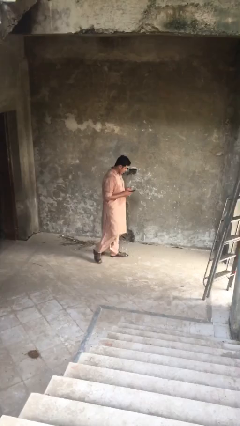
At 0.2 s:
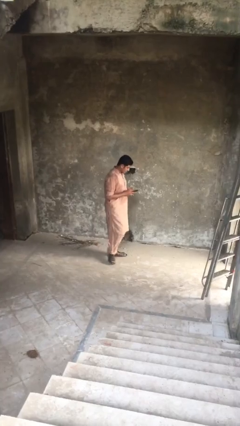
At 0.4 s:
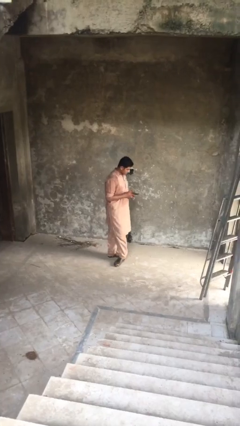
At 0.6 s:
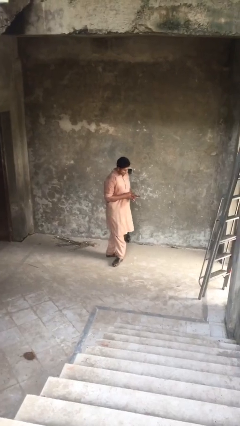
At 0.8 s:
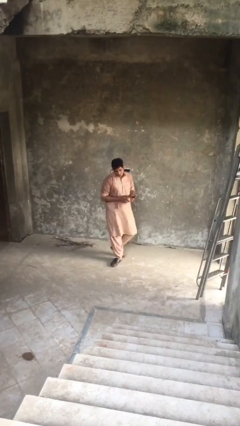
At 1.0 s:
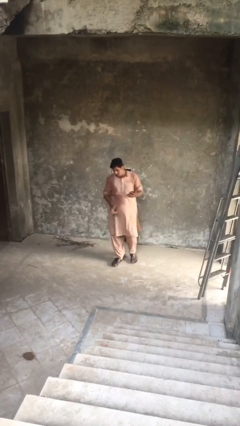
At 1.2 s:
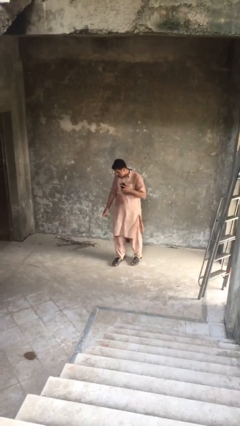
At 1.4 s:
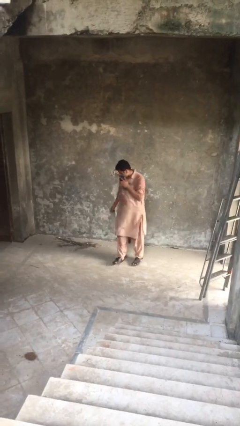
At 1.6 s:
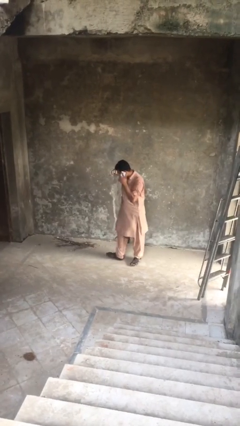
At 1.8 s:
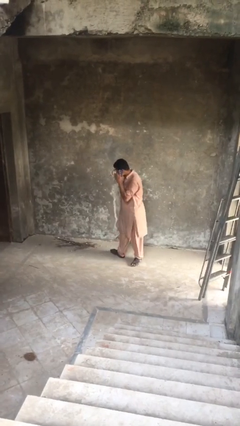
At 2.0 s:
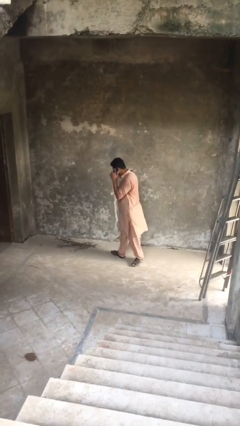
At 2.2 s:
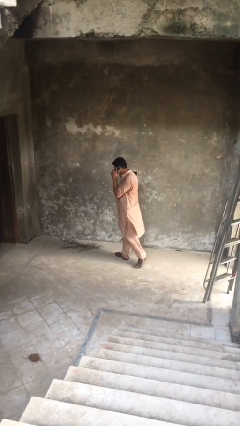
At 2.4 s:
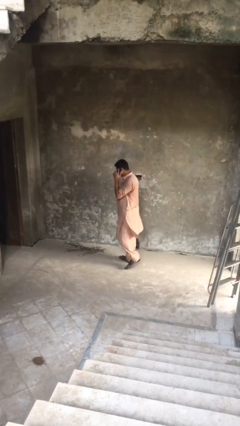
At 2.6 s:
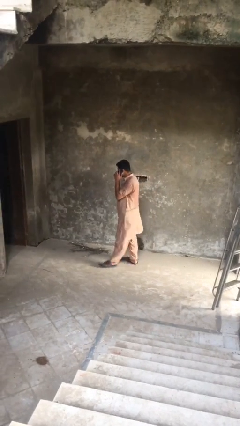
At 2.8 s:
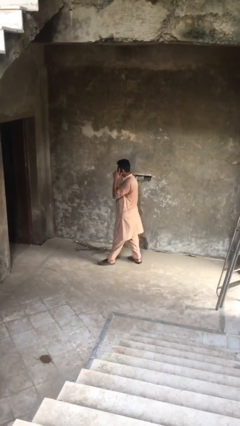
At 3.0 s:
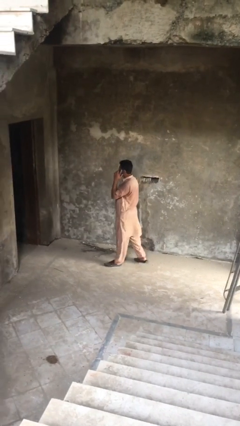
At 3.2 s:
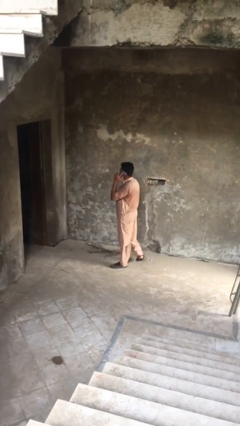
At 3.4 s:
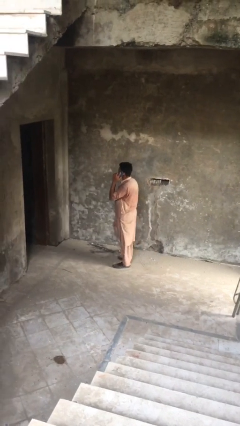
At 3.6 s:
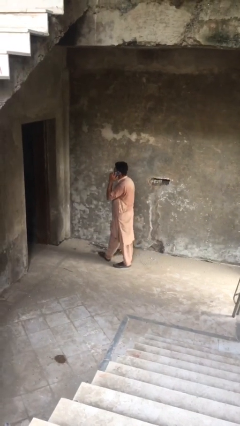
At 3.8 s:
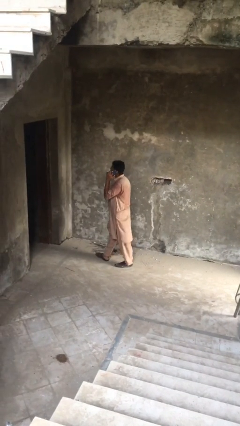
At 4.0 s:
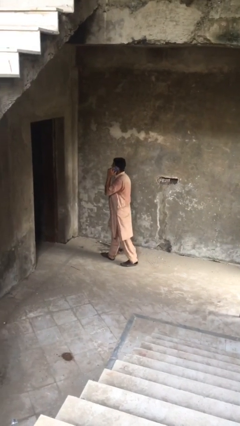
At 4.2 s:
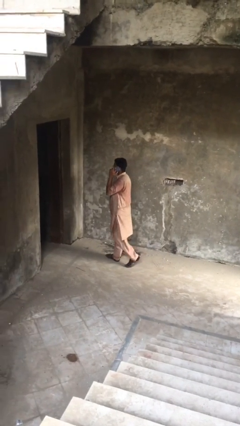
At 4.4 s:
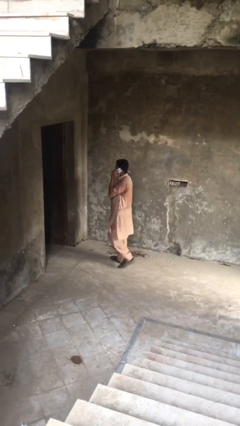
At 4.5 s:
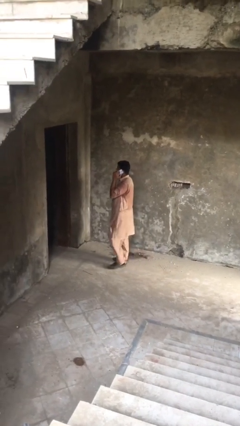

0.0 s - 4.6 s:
person talks on phone

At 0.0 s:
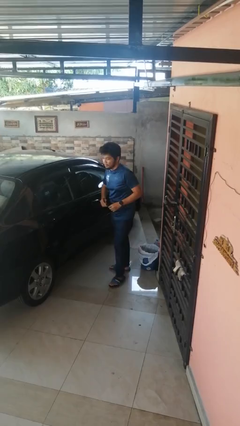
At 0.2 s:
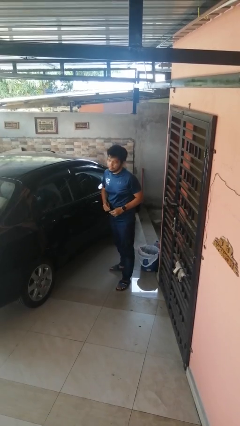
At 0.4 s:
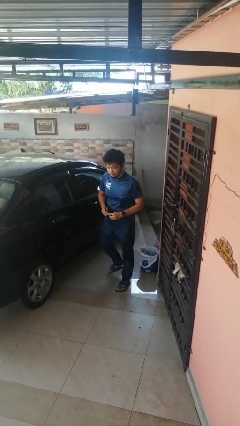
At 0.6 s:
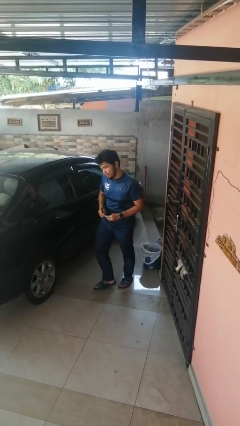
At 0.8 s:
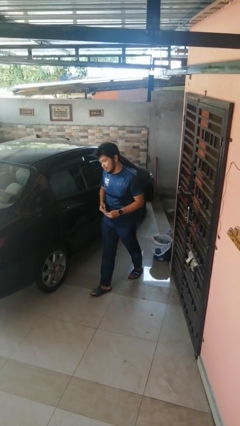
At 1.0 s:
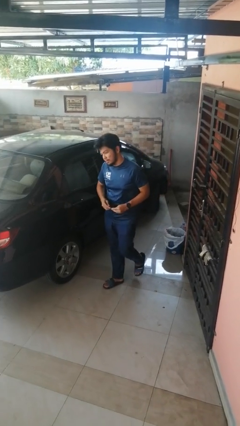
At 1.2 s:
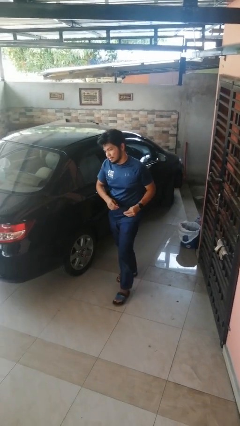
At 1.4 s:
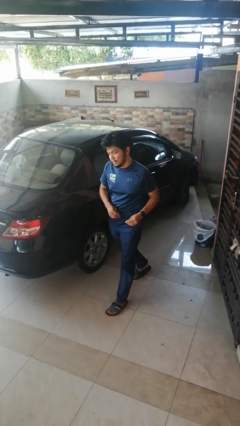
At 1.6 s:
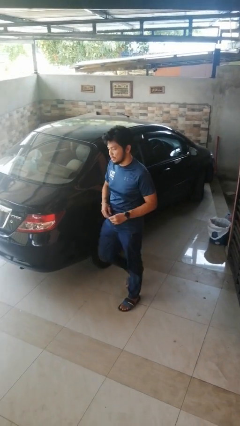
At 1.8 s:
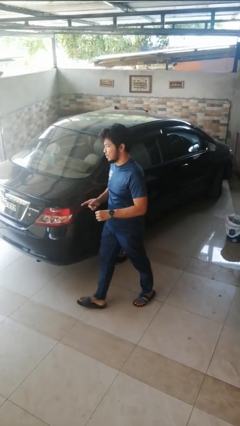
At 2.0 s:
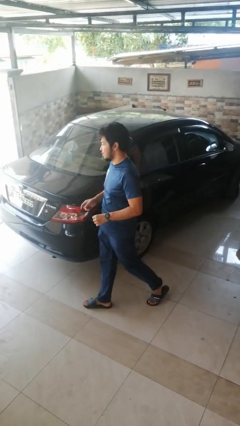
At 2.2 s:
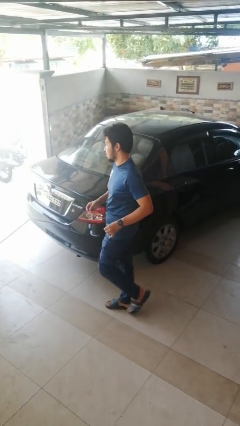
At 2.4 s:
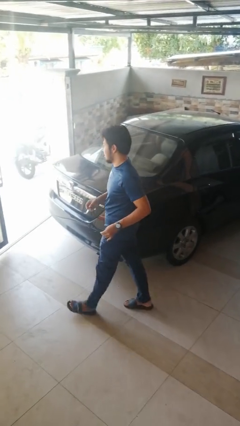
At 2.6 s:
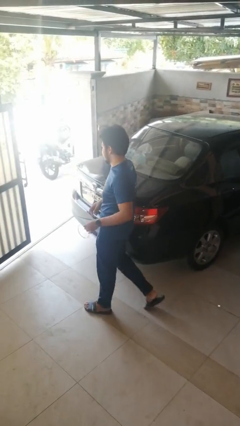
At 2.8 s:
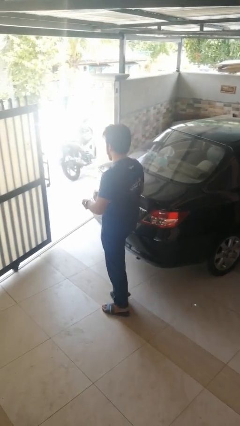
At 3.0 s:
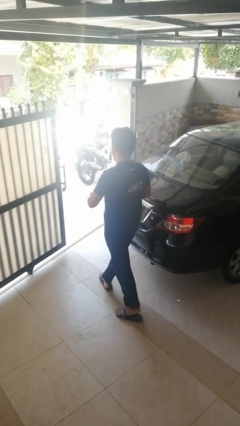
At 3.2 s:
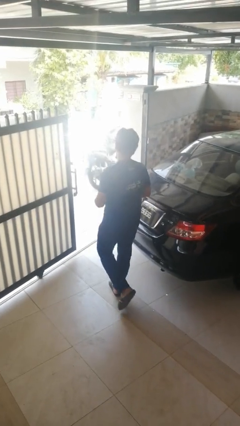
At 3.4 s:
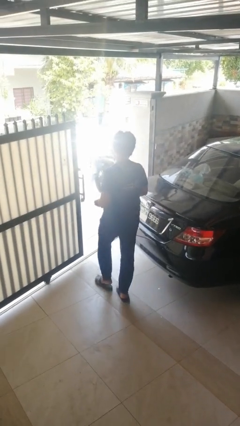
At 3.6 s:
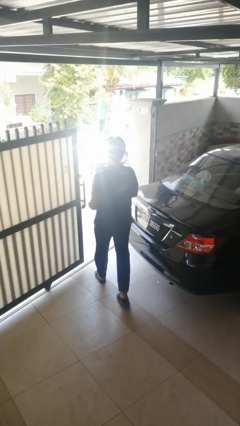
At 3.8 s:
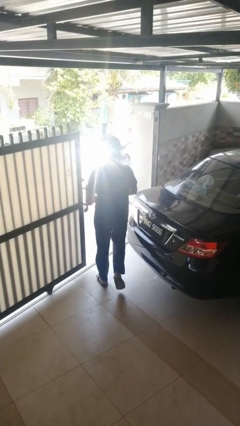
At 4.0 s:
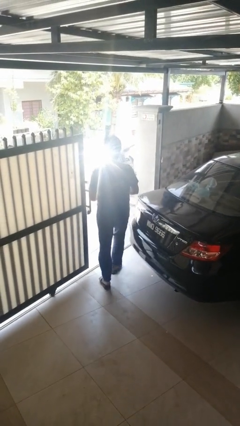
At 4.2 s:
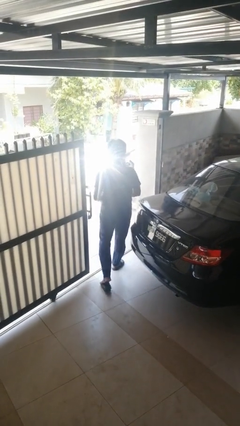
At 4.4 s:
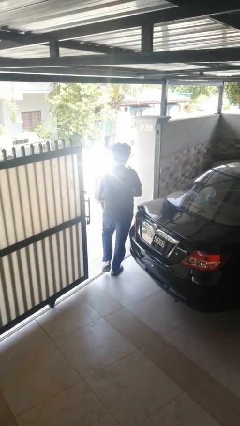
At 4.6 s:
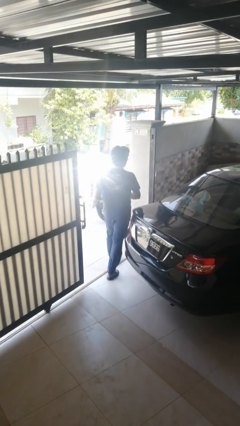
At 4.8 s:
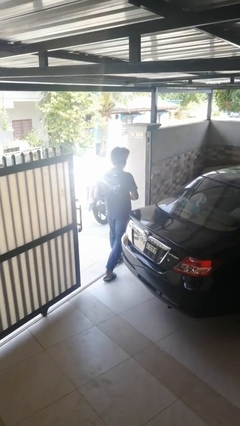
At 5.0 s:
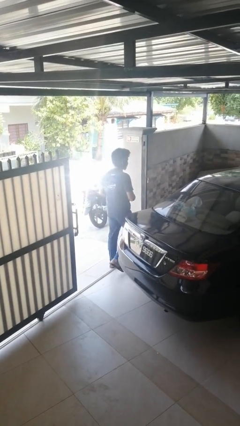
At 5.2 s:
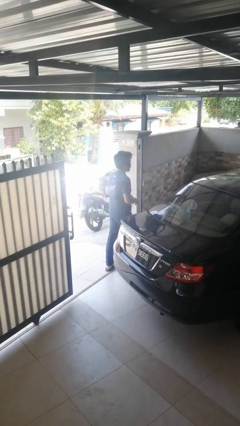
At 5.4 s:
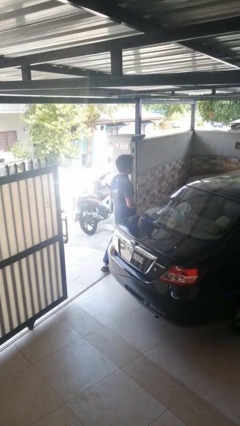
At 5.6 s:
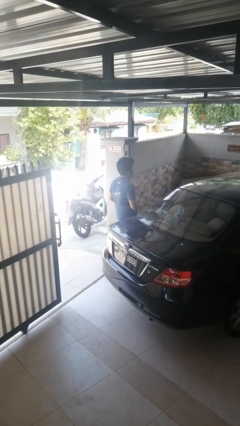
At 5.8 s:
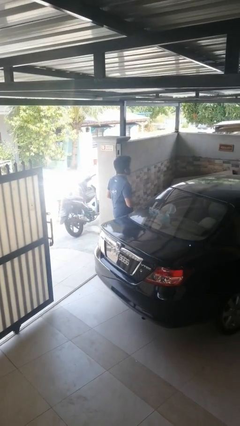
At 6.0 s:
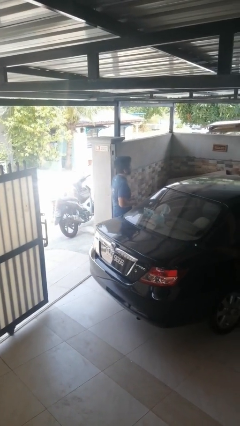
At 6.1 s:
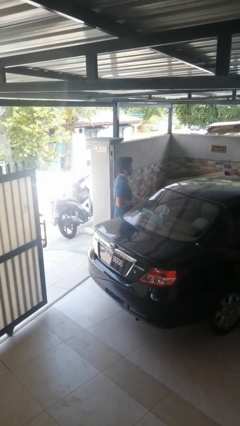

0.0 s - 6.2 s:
person walks around car

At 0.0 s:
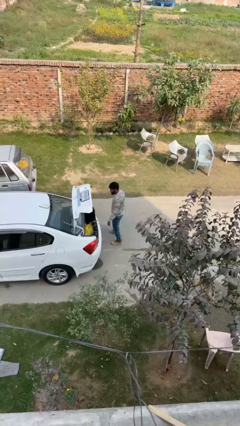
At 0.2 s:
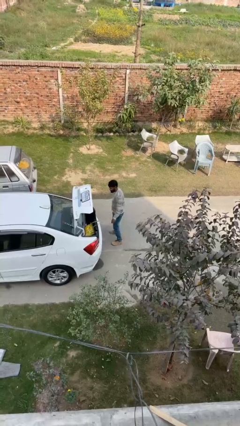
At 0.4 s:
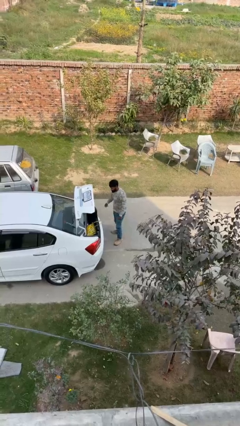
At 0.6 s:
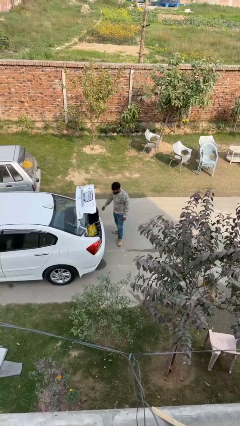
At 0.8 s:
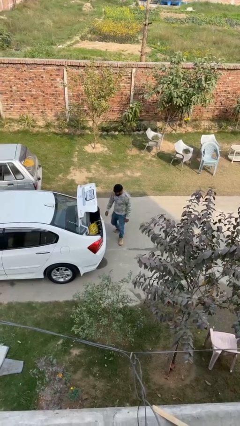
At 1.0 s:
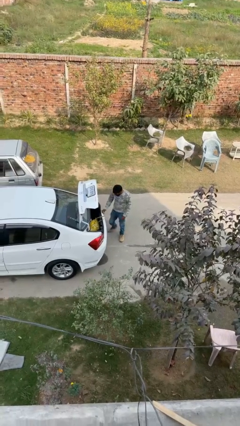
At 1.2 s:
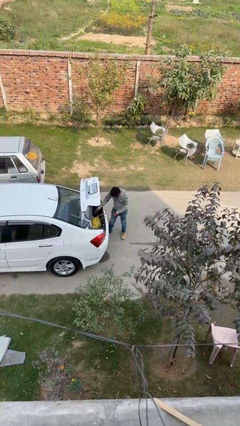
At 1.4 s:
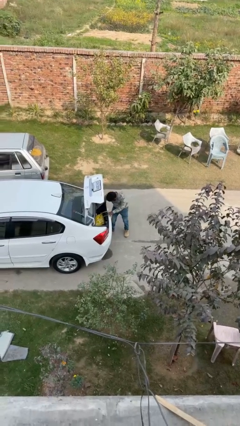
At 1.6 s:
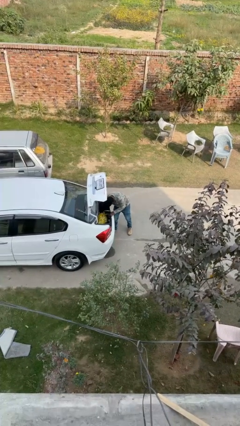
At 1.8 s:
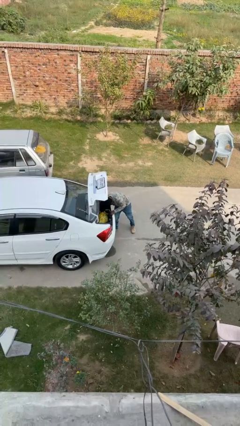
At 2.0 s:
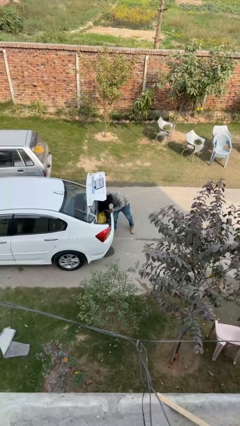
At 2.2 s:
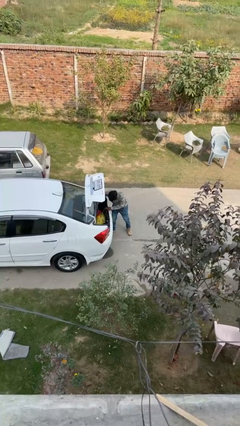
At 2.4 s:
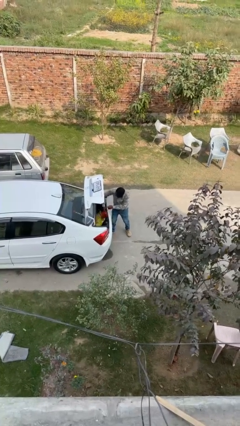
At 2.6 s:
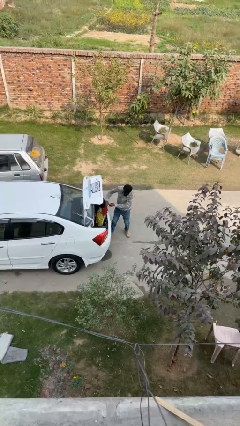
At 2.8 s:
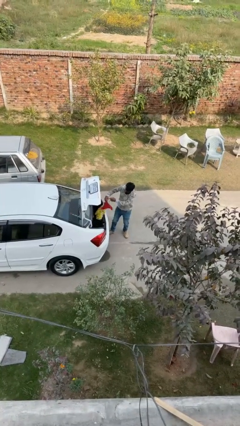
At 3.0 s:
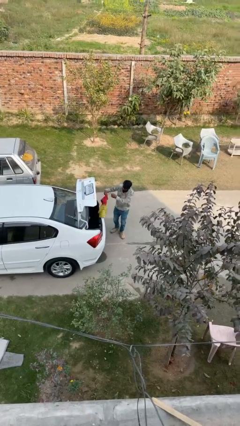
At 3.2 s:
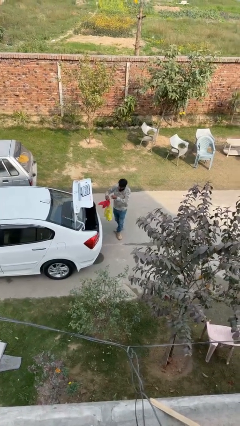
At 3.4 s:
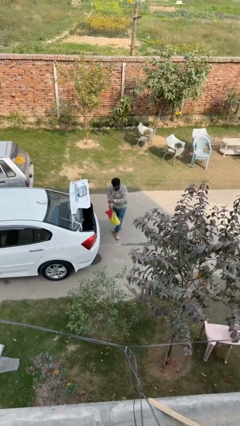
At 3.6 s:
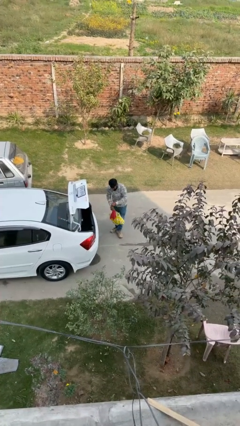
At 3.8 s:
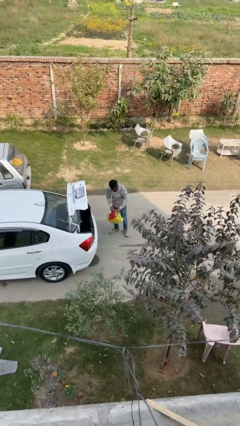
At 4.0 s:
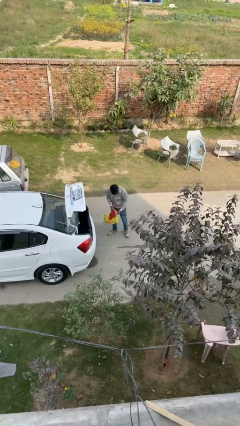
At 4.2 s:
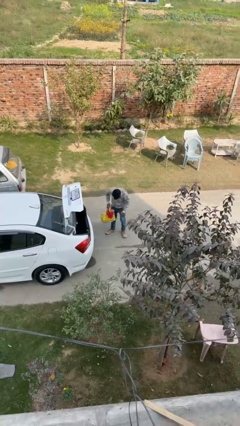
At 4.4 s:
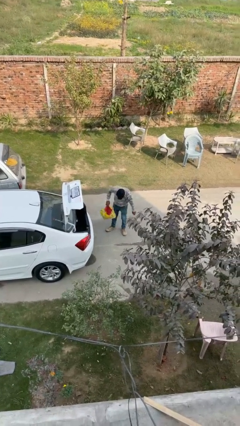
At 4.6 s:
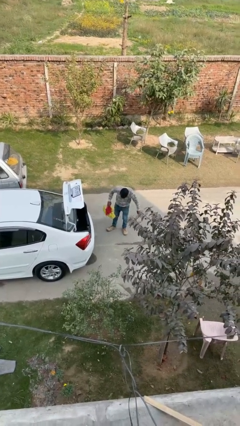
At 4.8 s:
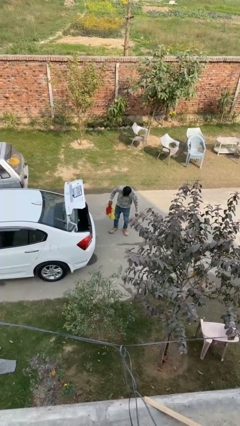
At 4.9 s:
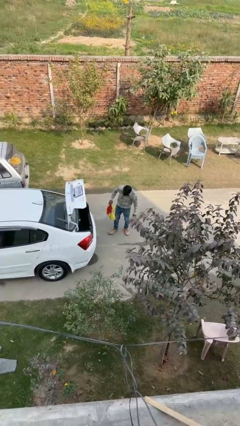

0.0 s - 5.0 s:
person unloads car

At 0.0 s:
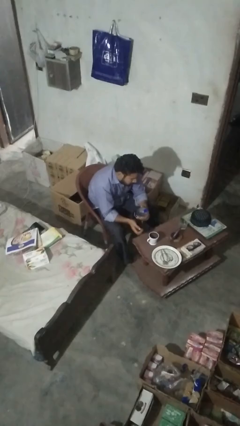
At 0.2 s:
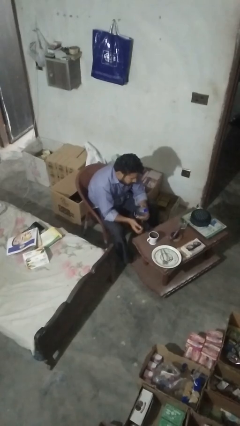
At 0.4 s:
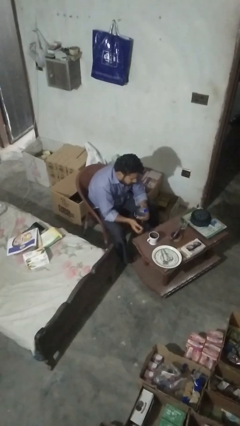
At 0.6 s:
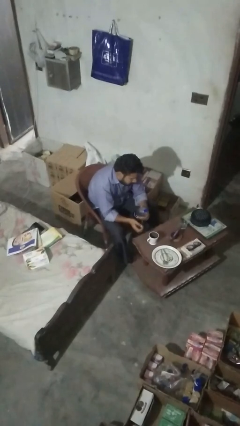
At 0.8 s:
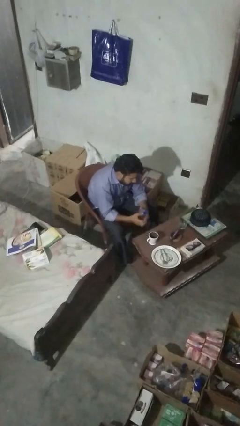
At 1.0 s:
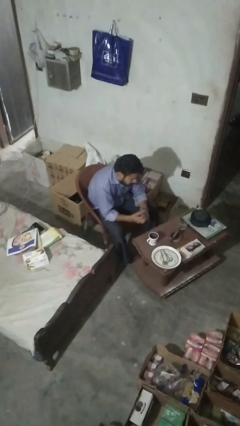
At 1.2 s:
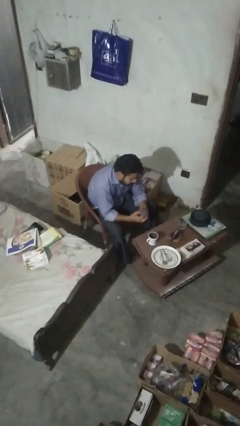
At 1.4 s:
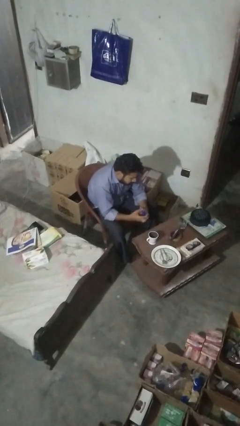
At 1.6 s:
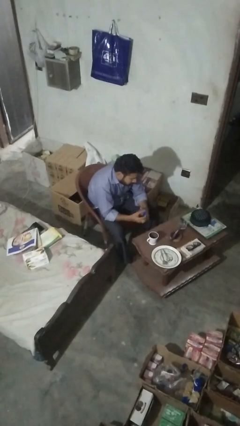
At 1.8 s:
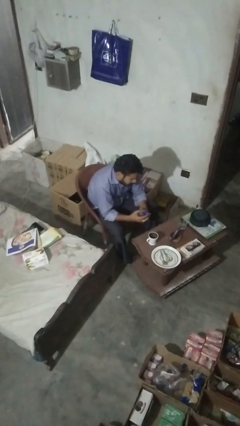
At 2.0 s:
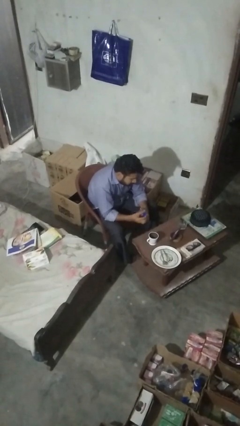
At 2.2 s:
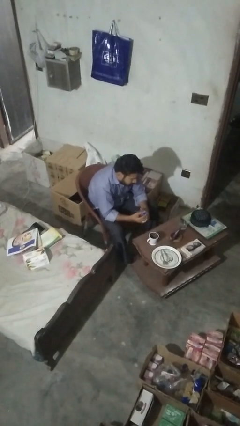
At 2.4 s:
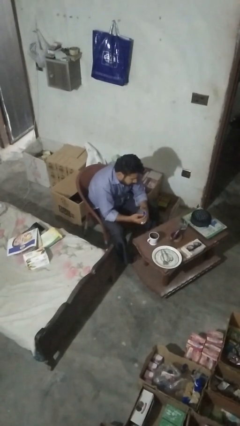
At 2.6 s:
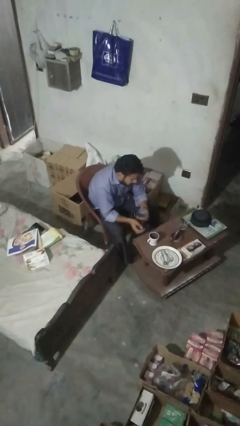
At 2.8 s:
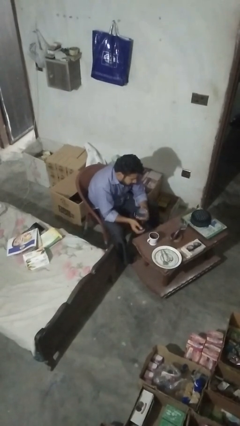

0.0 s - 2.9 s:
person unscrews lid from bottle
